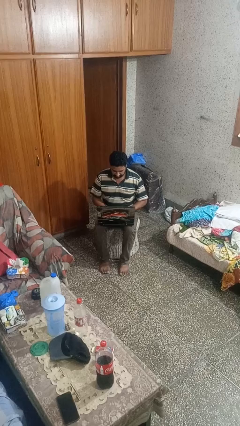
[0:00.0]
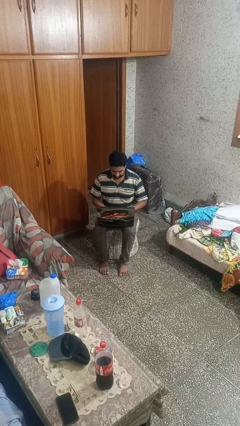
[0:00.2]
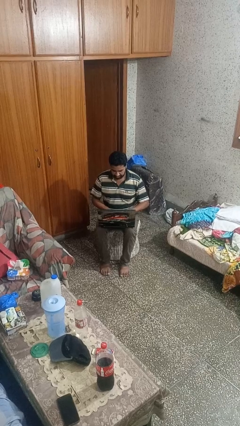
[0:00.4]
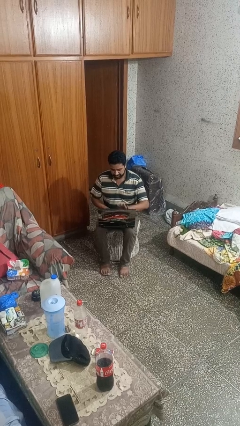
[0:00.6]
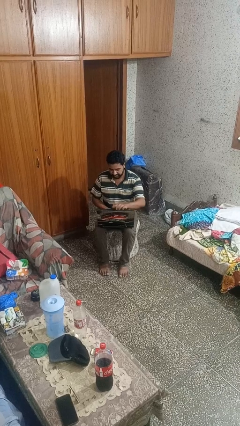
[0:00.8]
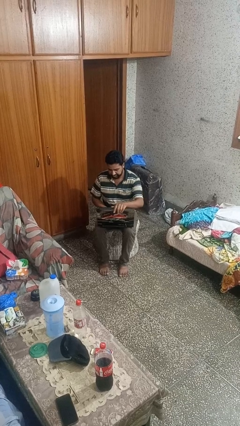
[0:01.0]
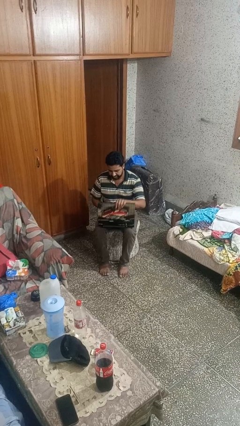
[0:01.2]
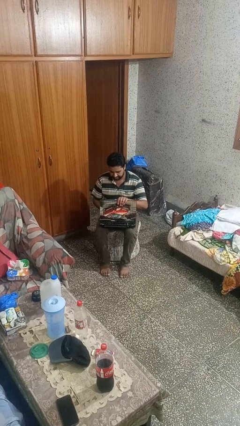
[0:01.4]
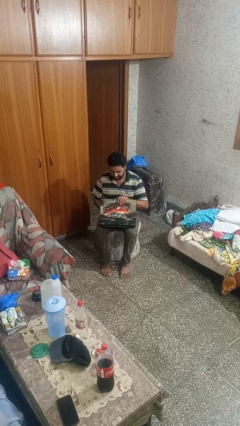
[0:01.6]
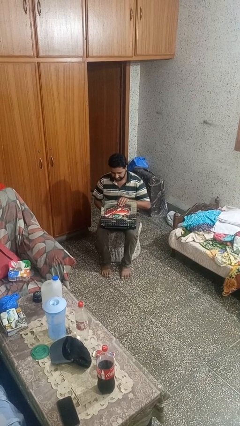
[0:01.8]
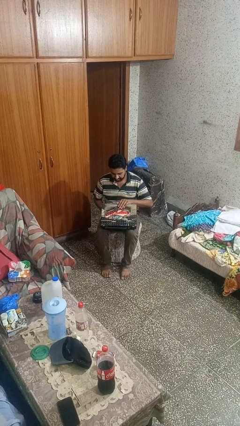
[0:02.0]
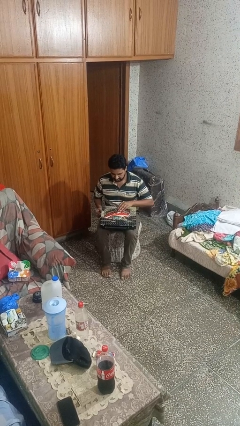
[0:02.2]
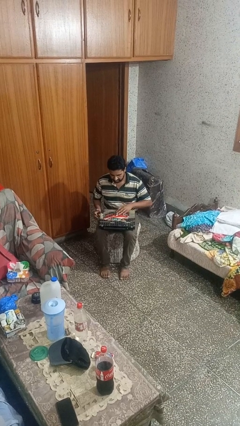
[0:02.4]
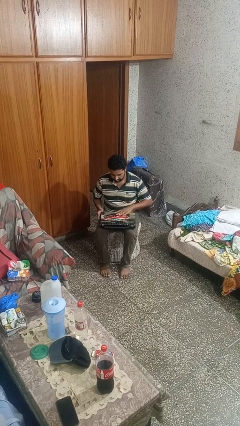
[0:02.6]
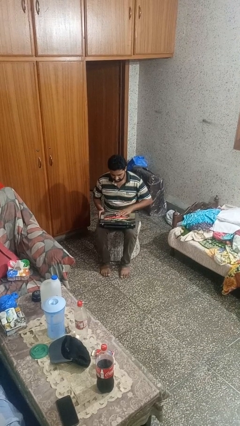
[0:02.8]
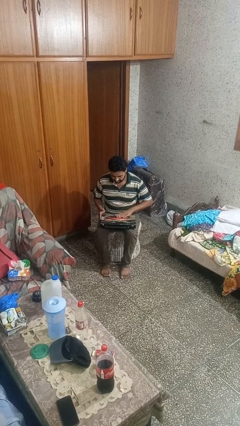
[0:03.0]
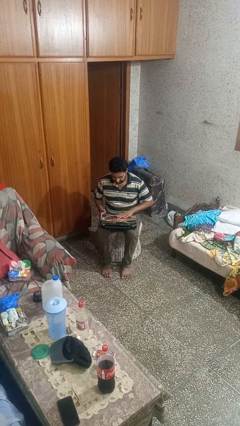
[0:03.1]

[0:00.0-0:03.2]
person closes laptop

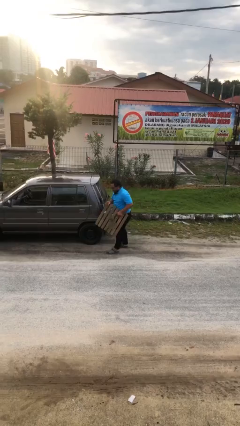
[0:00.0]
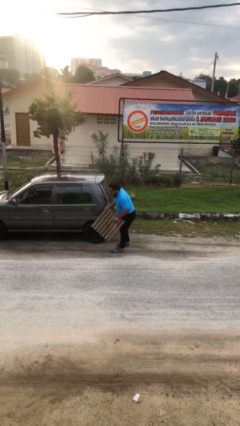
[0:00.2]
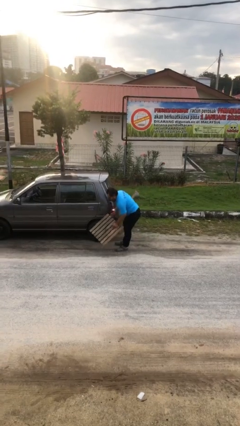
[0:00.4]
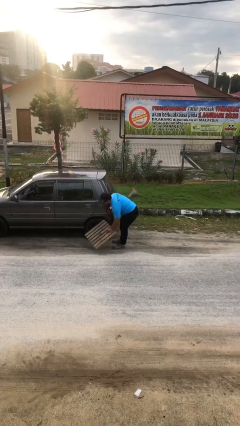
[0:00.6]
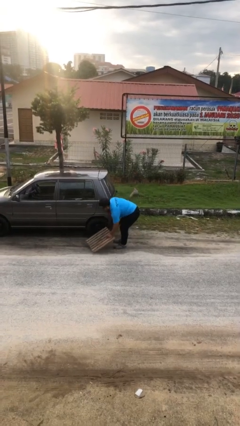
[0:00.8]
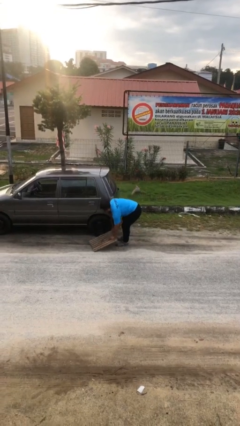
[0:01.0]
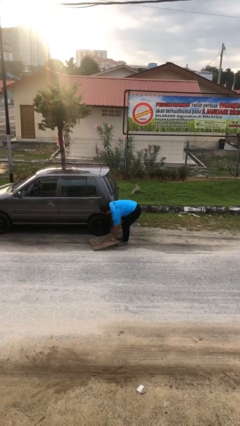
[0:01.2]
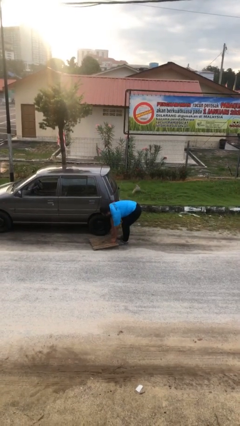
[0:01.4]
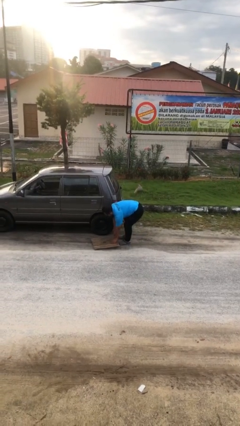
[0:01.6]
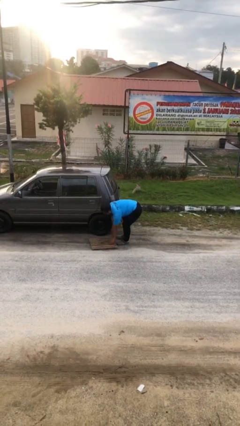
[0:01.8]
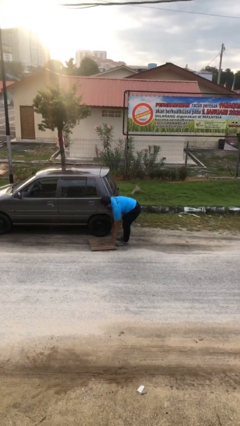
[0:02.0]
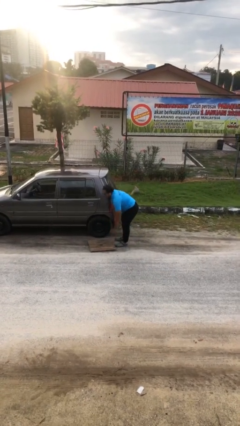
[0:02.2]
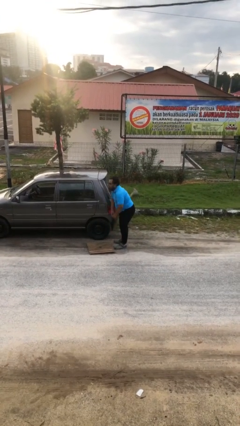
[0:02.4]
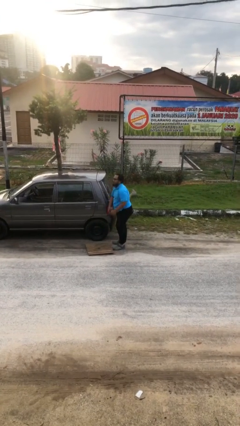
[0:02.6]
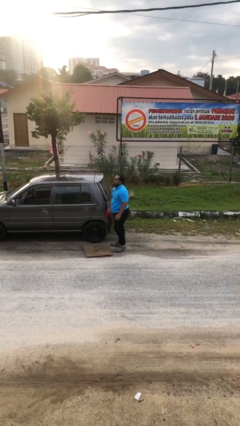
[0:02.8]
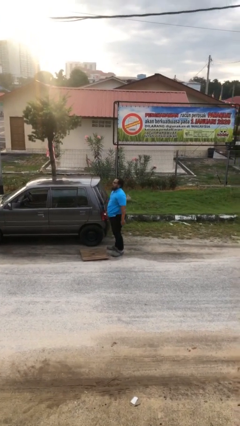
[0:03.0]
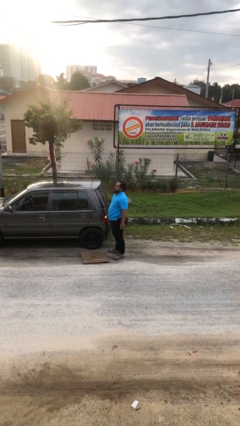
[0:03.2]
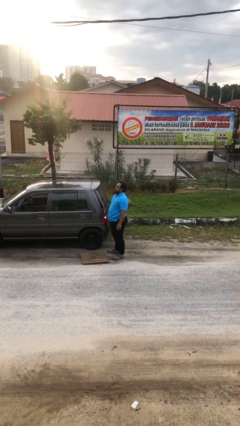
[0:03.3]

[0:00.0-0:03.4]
person puts down object on floor

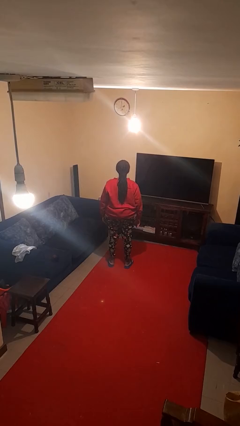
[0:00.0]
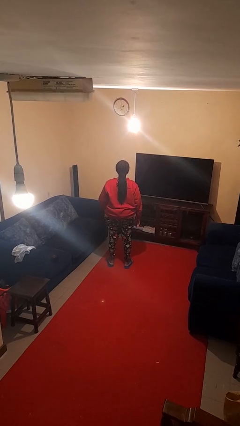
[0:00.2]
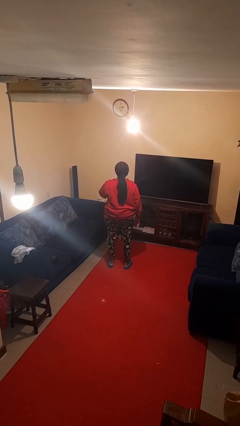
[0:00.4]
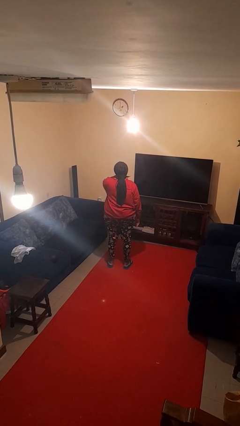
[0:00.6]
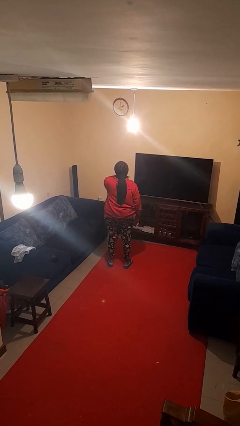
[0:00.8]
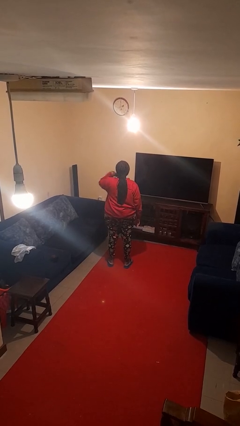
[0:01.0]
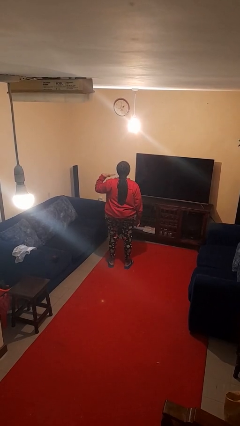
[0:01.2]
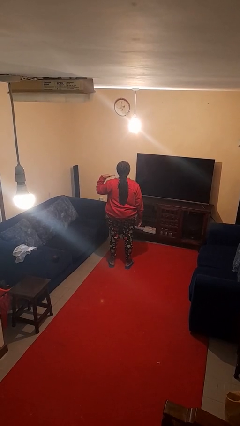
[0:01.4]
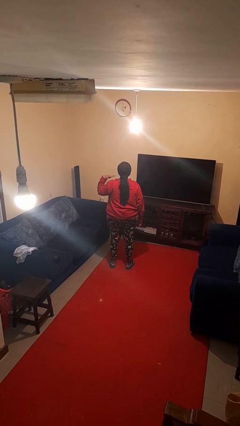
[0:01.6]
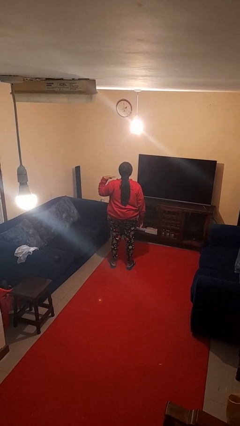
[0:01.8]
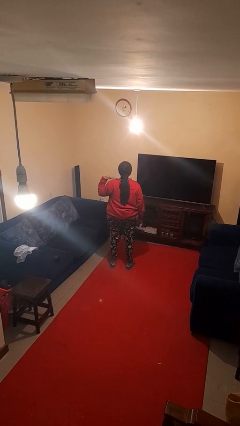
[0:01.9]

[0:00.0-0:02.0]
person gestures cut

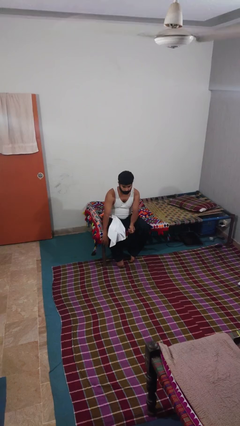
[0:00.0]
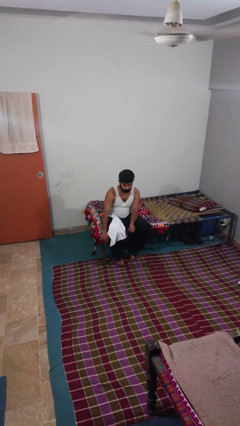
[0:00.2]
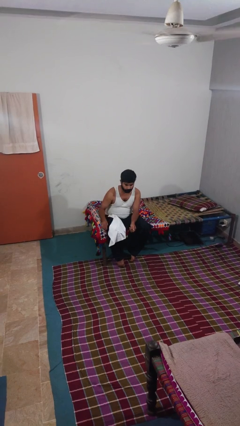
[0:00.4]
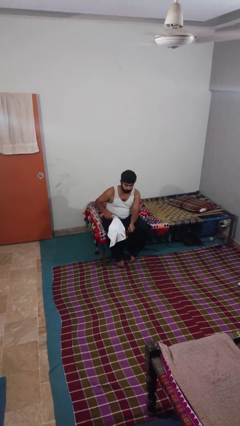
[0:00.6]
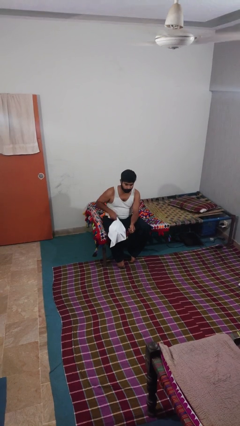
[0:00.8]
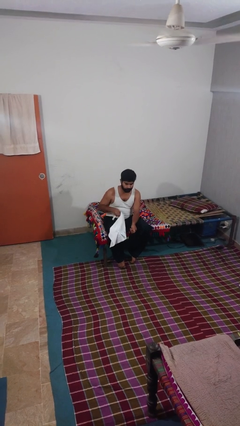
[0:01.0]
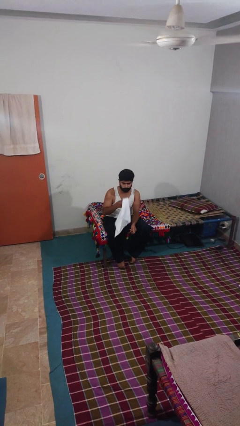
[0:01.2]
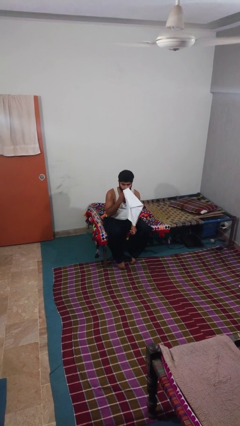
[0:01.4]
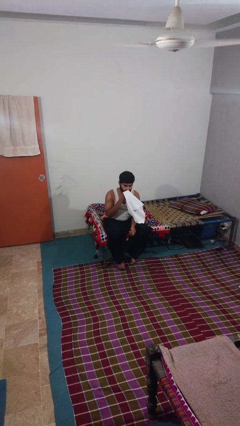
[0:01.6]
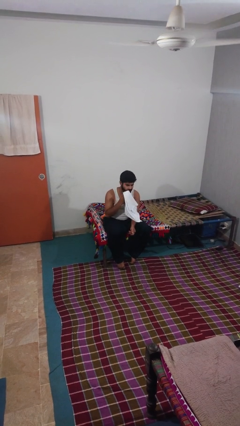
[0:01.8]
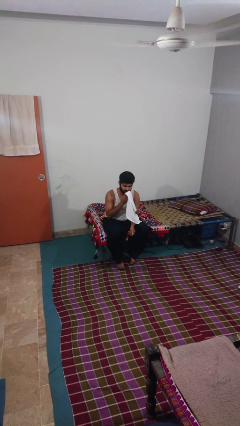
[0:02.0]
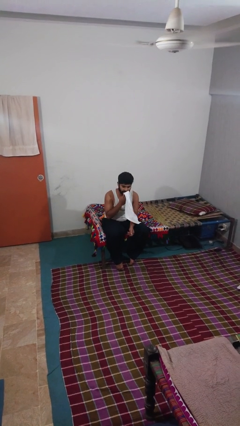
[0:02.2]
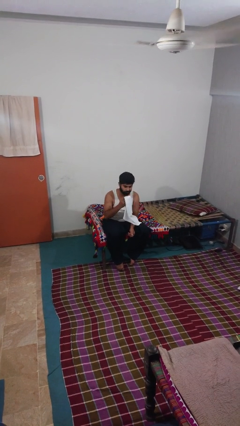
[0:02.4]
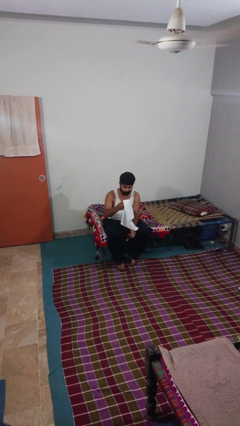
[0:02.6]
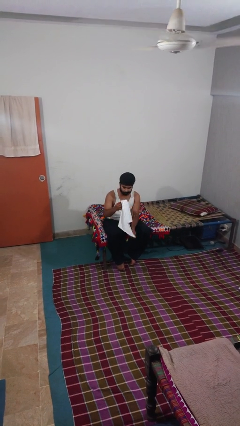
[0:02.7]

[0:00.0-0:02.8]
person wipes mouth with napkin

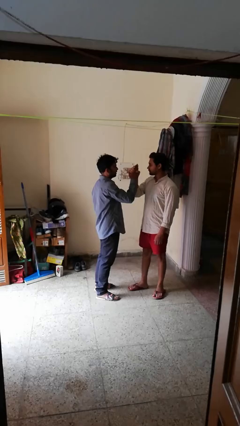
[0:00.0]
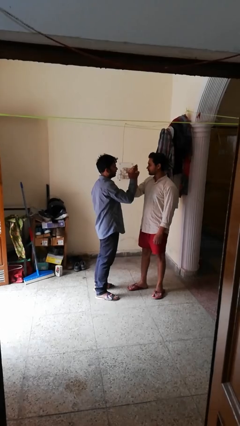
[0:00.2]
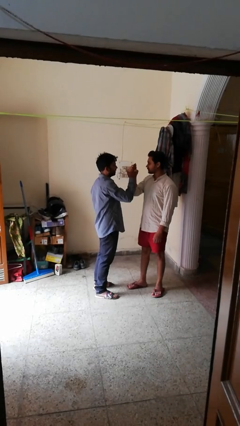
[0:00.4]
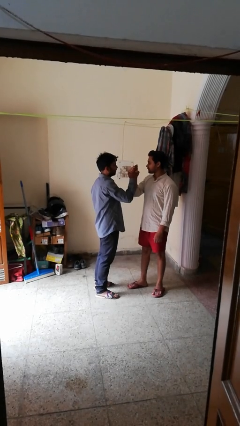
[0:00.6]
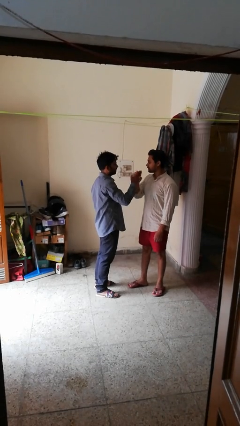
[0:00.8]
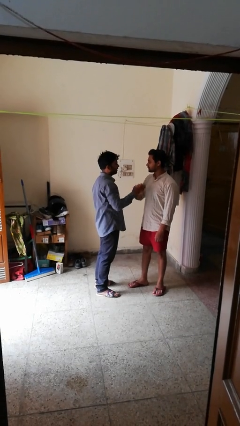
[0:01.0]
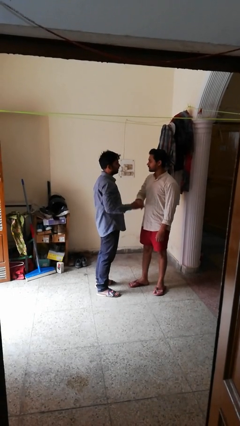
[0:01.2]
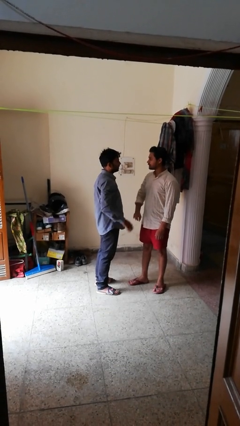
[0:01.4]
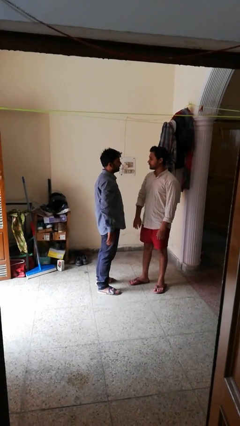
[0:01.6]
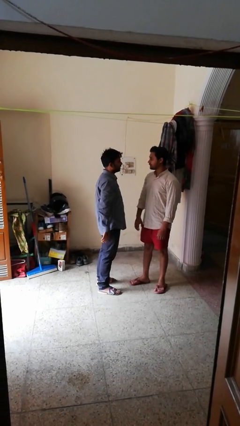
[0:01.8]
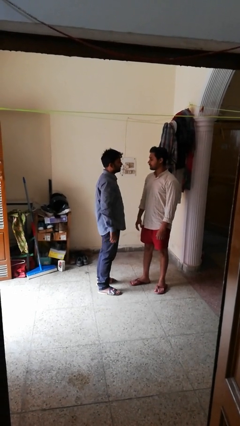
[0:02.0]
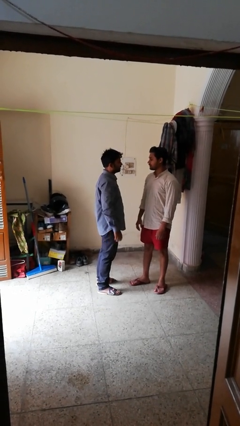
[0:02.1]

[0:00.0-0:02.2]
person highfives hand

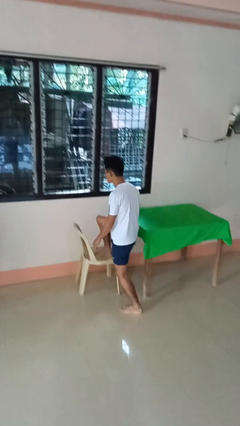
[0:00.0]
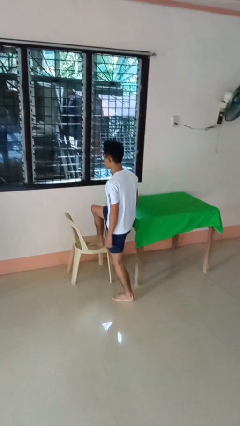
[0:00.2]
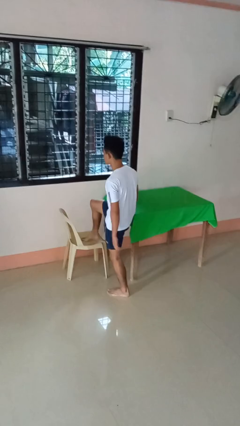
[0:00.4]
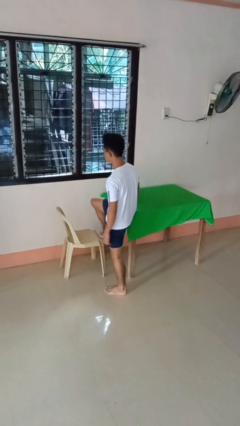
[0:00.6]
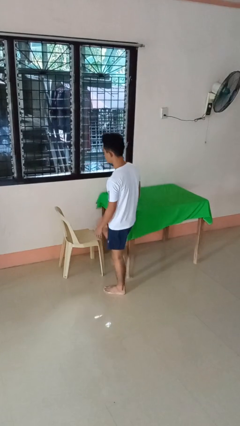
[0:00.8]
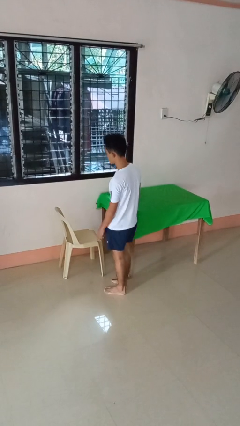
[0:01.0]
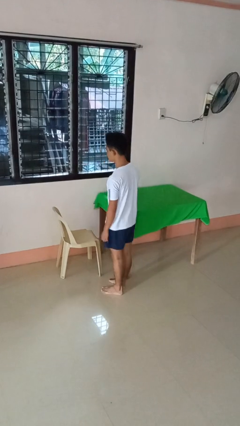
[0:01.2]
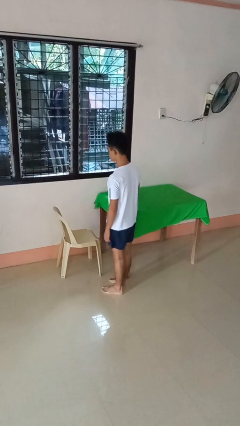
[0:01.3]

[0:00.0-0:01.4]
person climbs off chair

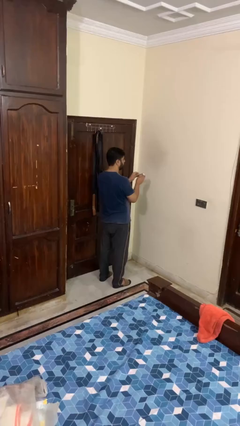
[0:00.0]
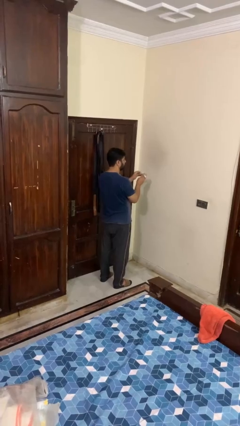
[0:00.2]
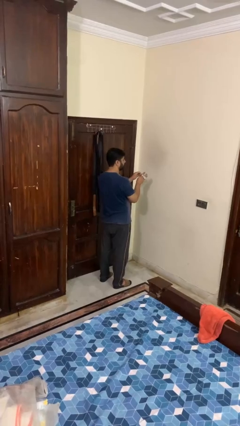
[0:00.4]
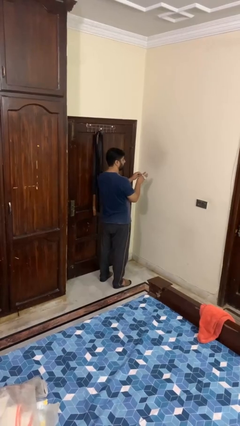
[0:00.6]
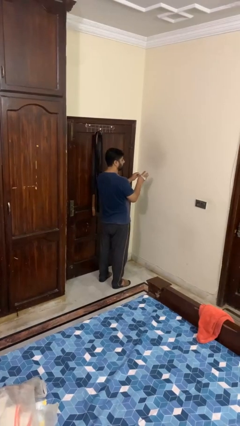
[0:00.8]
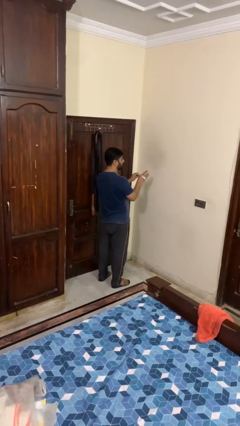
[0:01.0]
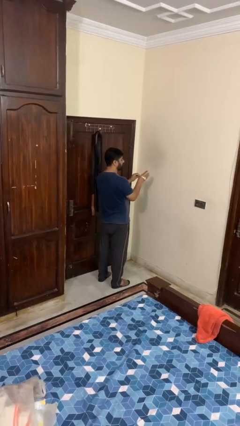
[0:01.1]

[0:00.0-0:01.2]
person puts on wristwatch

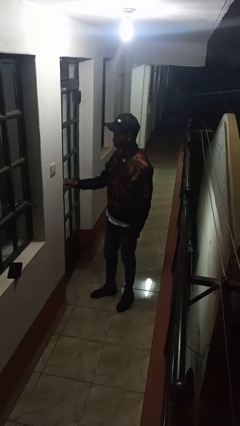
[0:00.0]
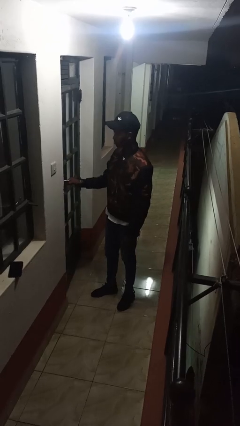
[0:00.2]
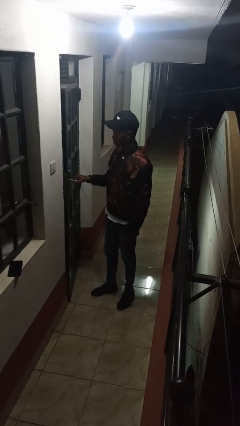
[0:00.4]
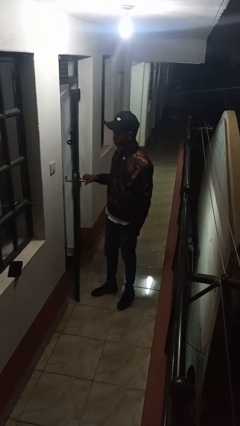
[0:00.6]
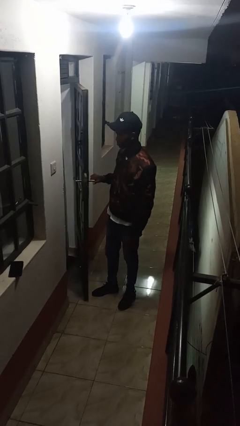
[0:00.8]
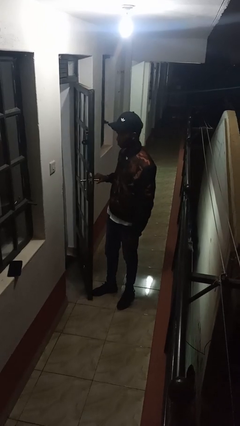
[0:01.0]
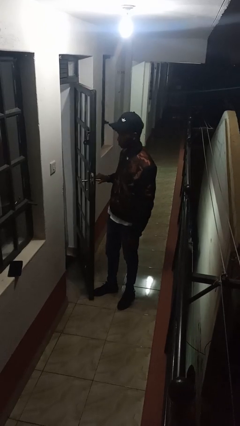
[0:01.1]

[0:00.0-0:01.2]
person closes door with hip
